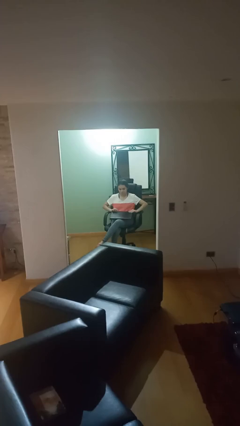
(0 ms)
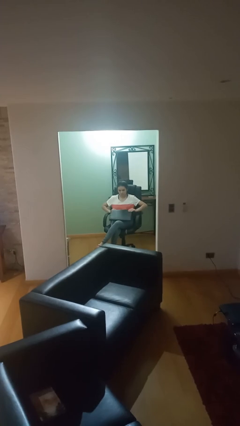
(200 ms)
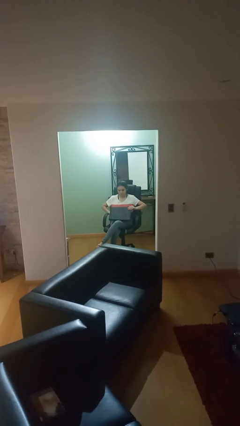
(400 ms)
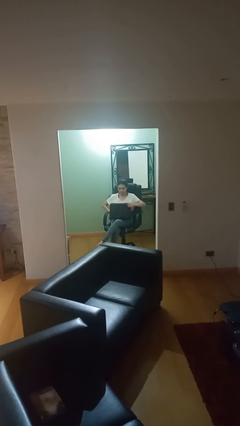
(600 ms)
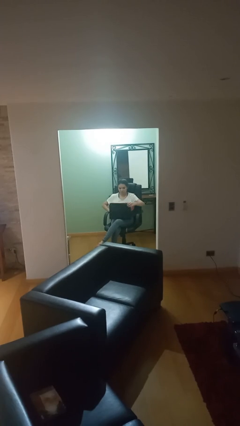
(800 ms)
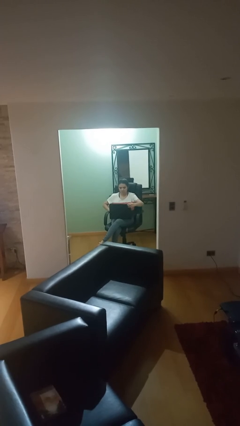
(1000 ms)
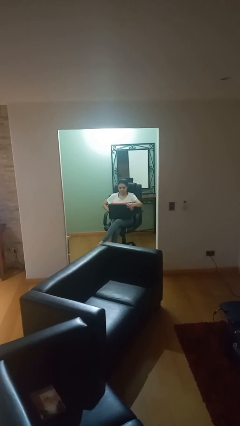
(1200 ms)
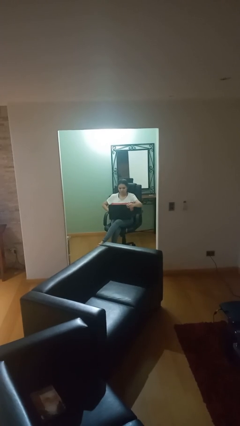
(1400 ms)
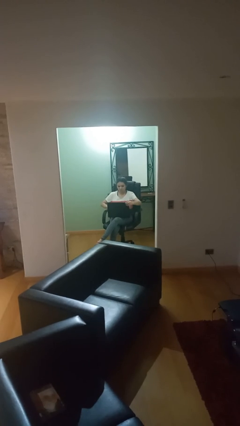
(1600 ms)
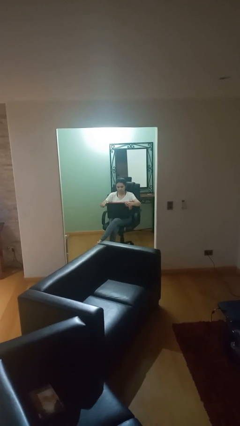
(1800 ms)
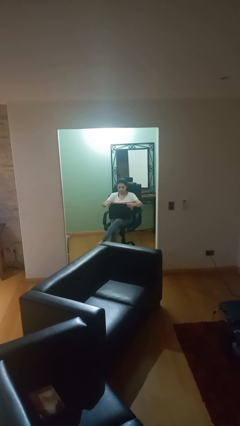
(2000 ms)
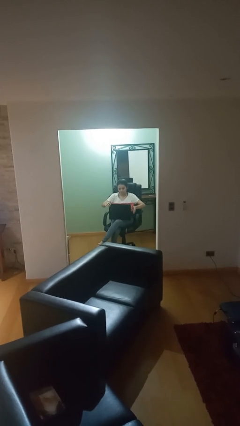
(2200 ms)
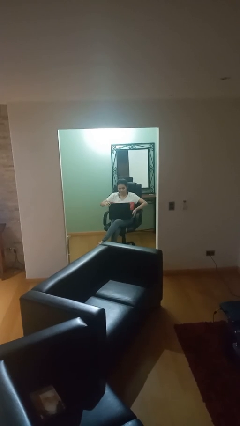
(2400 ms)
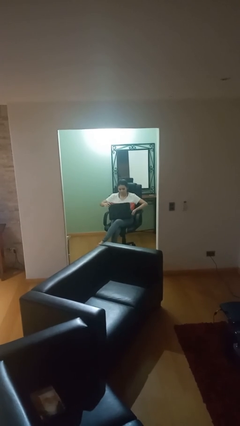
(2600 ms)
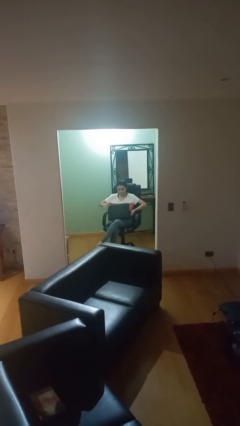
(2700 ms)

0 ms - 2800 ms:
person interacts with laptop

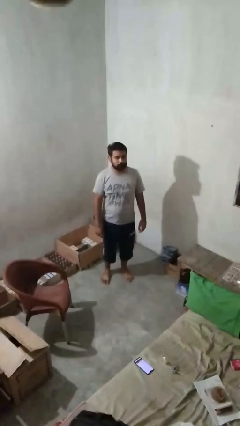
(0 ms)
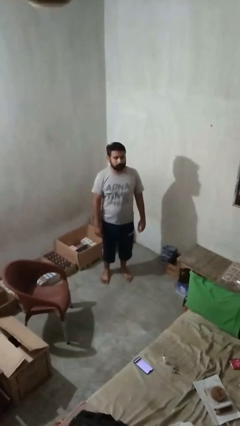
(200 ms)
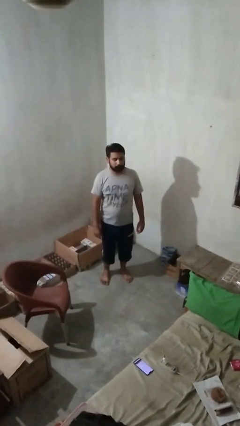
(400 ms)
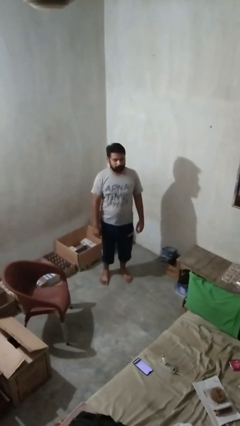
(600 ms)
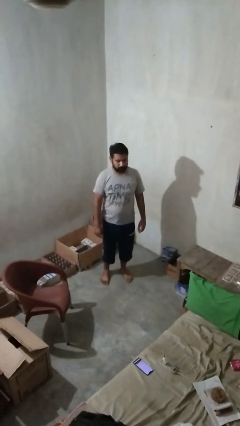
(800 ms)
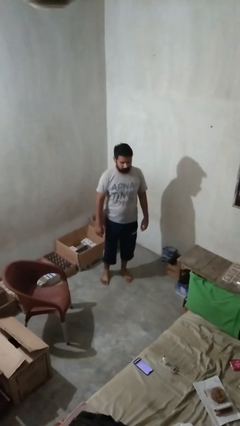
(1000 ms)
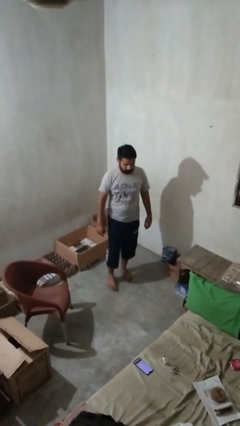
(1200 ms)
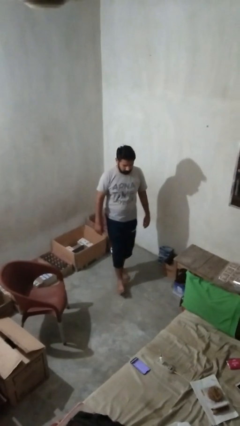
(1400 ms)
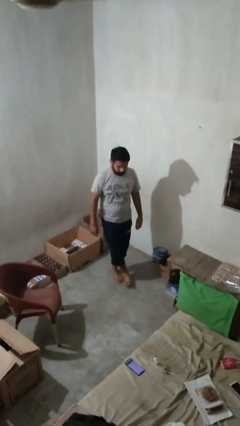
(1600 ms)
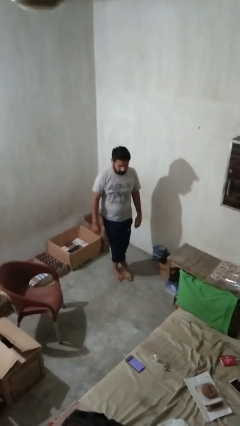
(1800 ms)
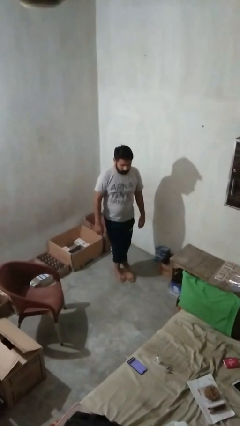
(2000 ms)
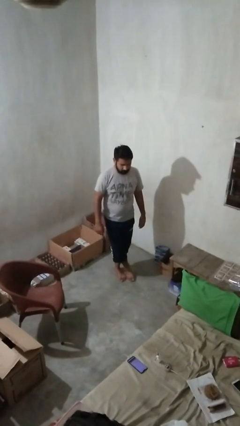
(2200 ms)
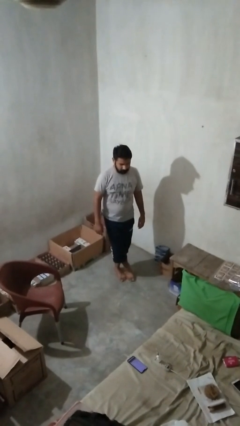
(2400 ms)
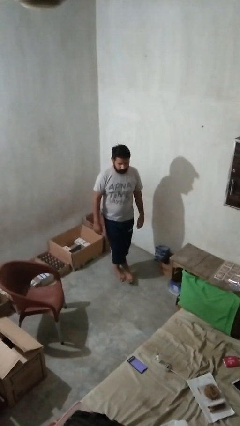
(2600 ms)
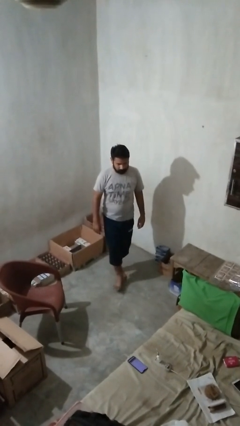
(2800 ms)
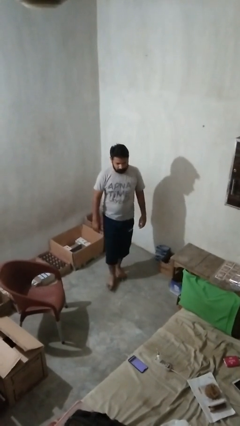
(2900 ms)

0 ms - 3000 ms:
person crosses legs

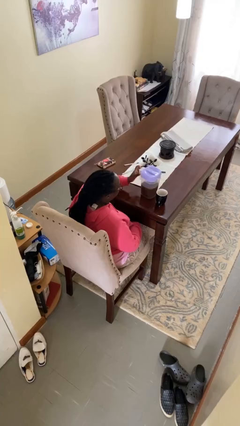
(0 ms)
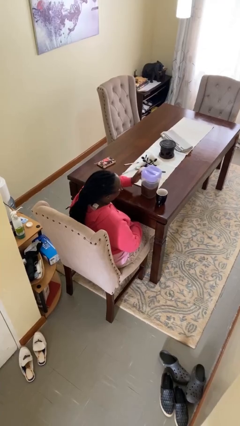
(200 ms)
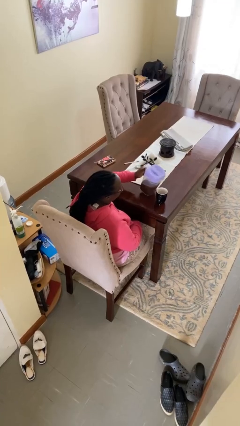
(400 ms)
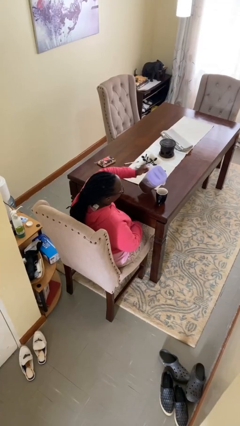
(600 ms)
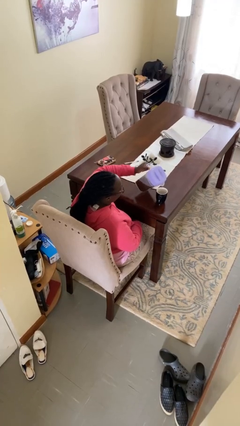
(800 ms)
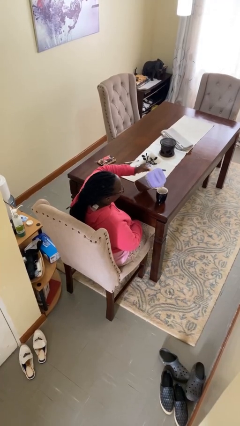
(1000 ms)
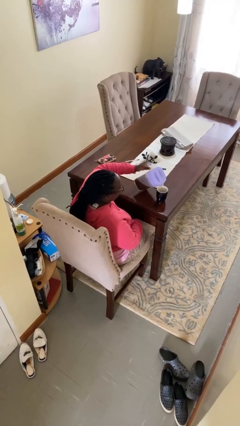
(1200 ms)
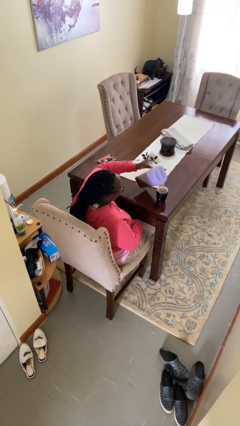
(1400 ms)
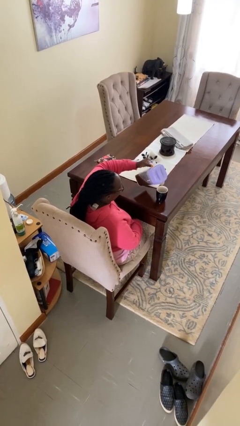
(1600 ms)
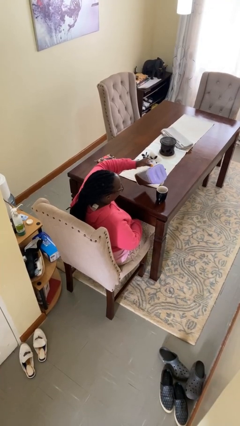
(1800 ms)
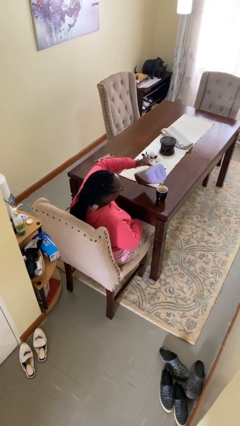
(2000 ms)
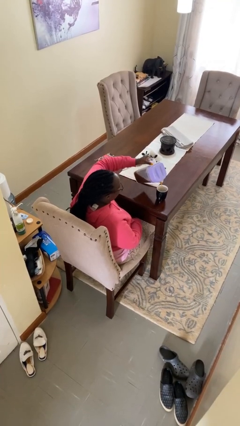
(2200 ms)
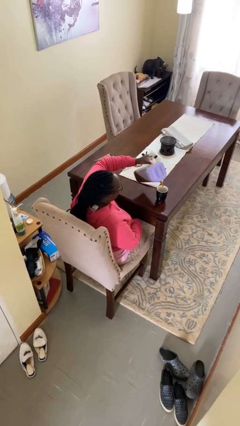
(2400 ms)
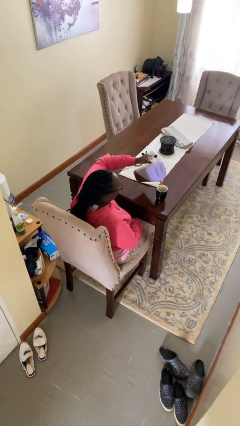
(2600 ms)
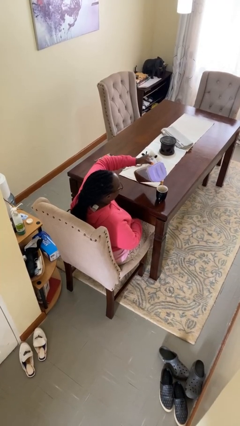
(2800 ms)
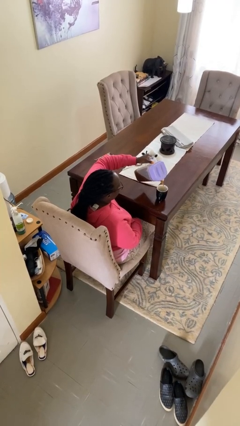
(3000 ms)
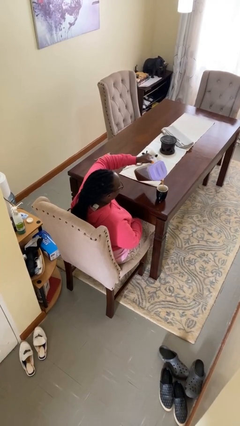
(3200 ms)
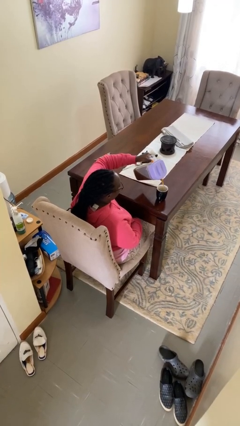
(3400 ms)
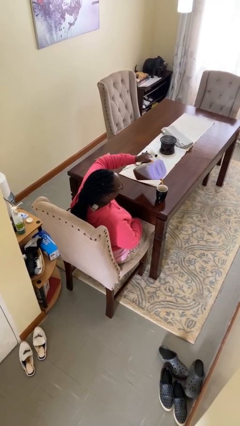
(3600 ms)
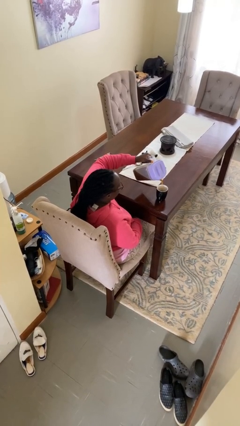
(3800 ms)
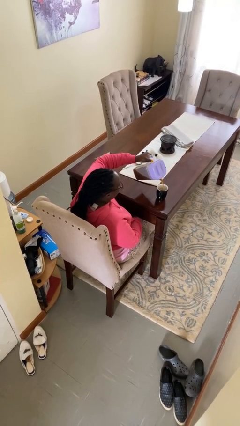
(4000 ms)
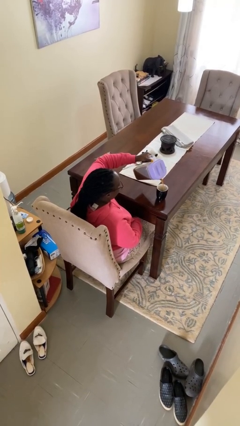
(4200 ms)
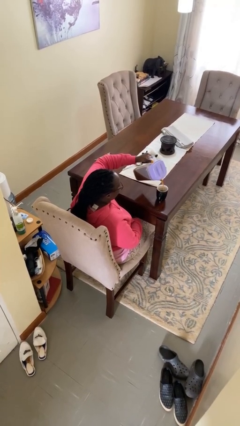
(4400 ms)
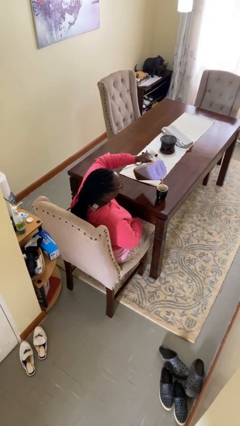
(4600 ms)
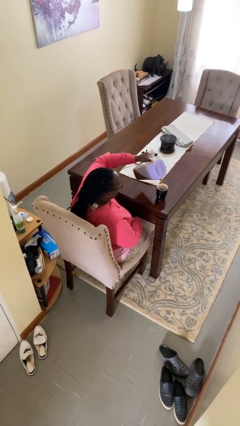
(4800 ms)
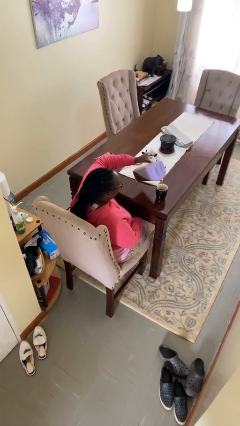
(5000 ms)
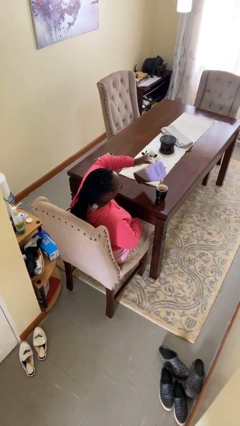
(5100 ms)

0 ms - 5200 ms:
person pours coffee into mug

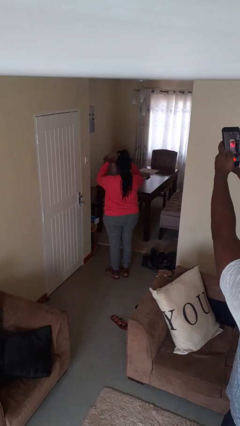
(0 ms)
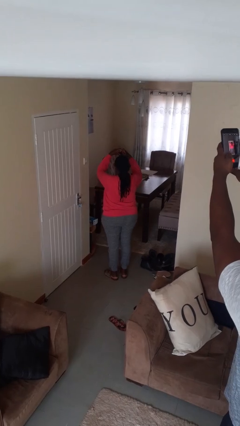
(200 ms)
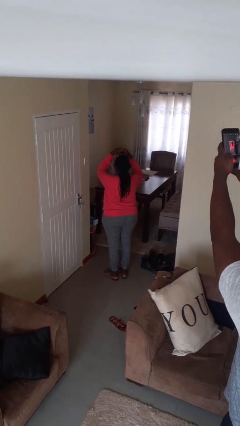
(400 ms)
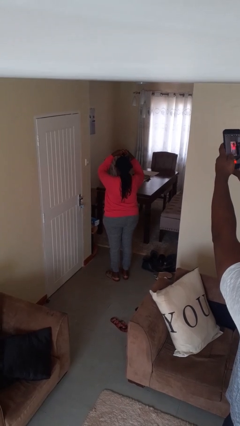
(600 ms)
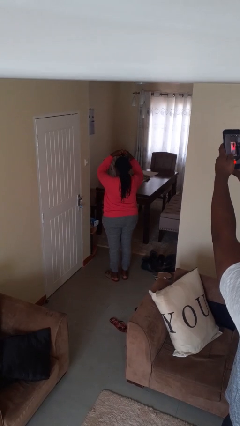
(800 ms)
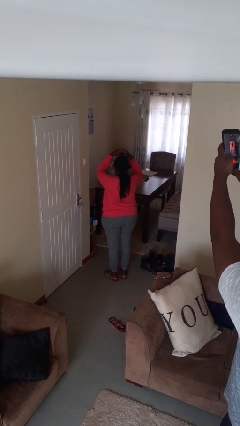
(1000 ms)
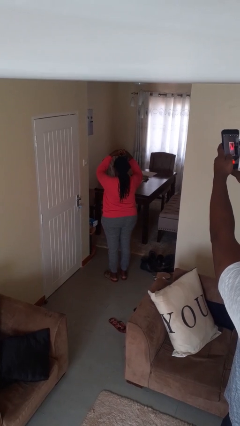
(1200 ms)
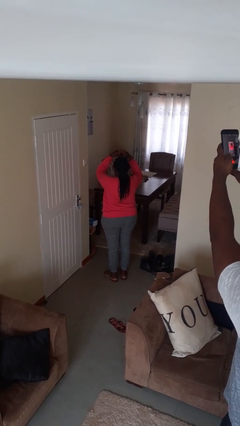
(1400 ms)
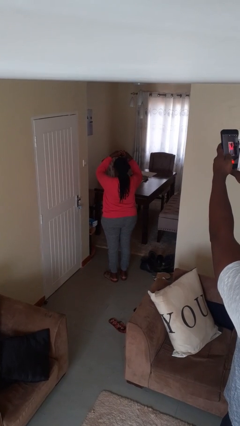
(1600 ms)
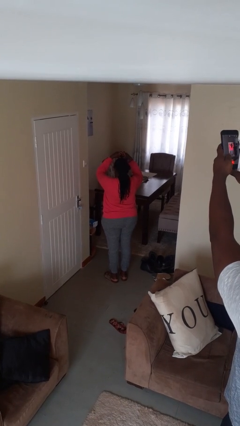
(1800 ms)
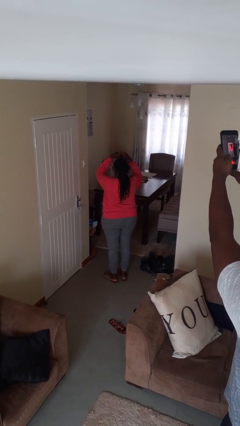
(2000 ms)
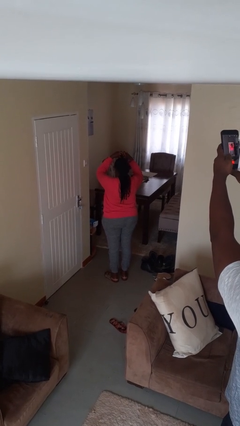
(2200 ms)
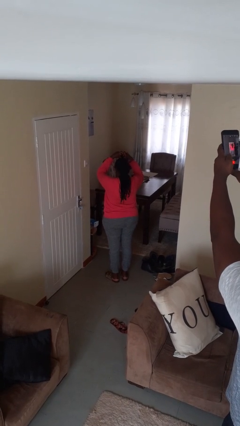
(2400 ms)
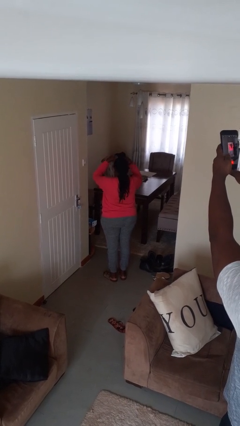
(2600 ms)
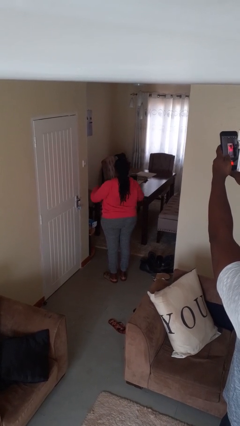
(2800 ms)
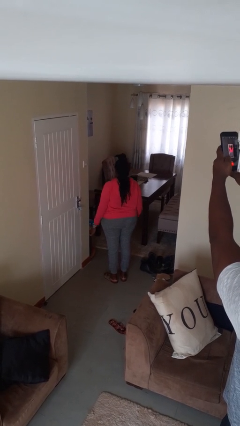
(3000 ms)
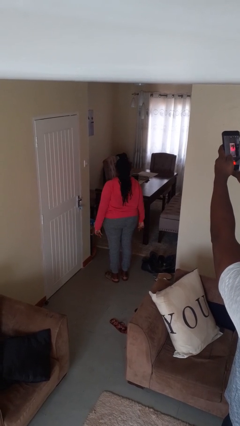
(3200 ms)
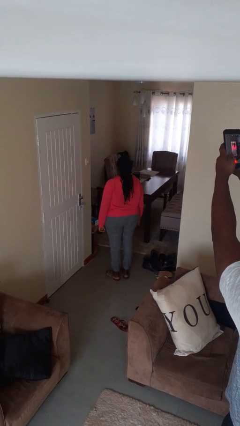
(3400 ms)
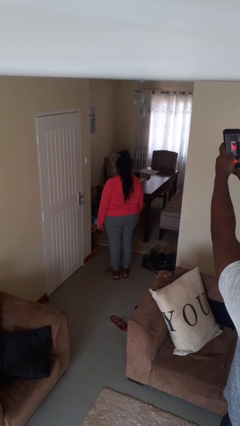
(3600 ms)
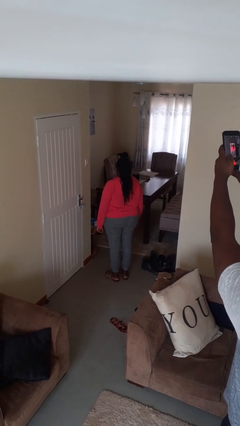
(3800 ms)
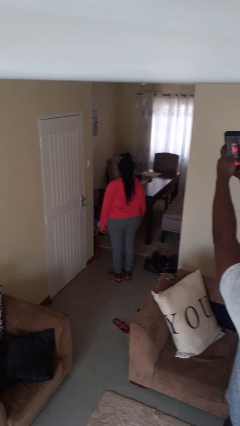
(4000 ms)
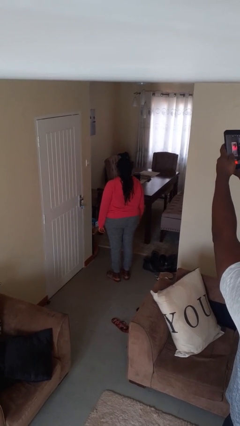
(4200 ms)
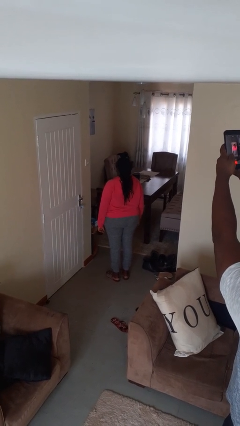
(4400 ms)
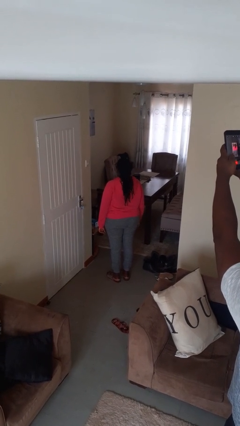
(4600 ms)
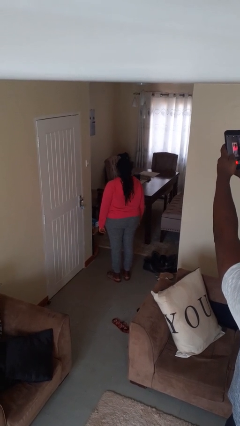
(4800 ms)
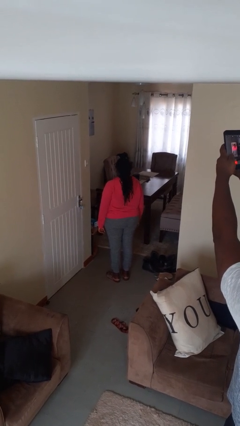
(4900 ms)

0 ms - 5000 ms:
person gestures heart

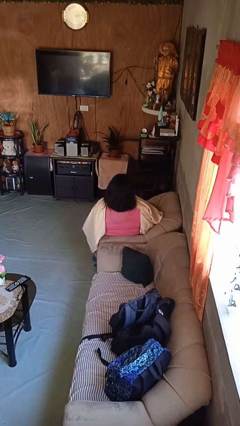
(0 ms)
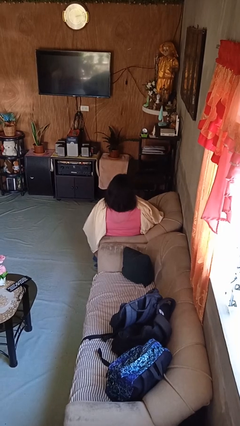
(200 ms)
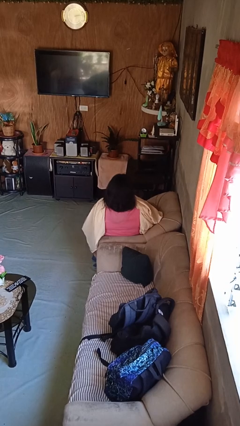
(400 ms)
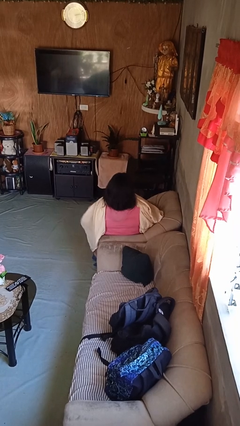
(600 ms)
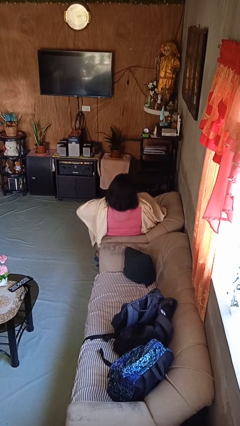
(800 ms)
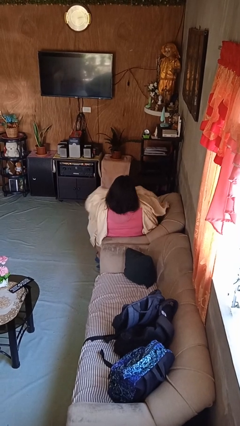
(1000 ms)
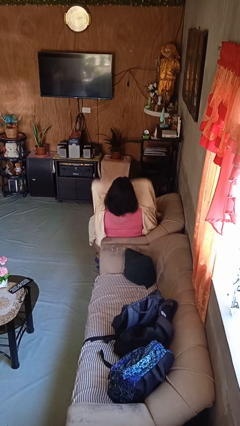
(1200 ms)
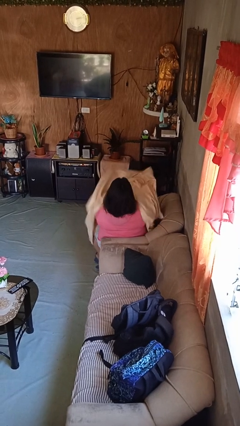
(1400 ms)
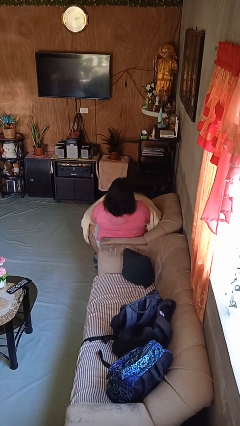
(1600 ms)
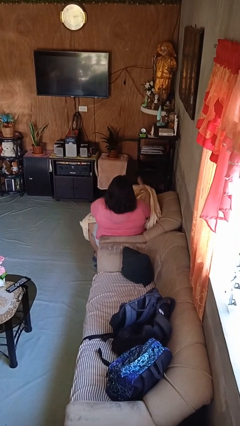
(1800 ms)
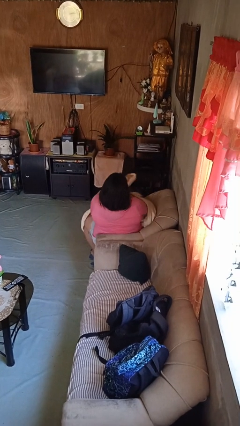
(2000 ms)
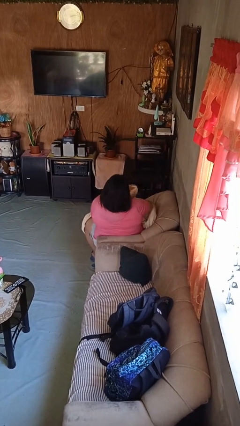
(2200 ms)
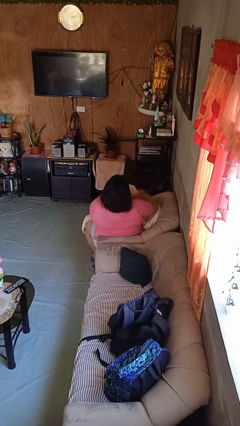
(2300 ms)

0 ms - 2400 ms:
person uncovers with blanket
